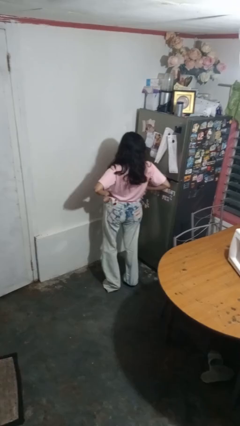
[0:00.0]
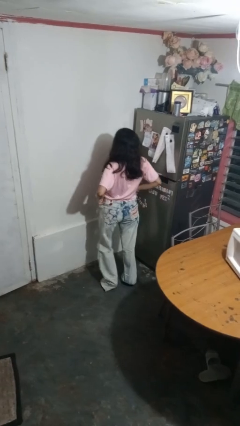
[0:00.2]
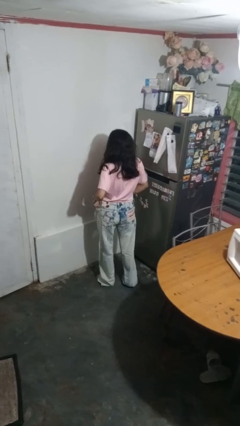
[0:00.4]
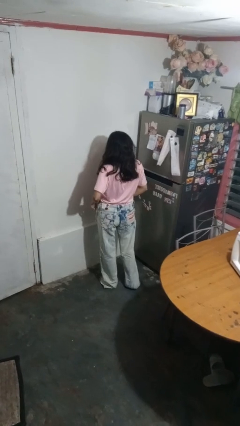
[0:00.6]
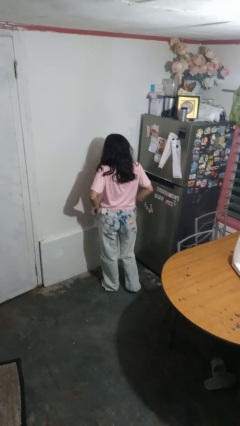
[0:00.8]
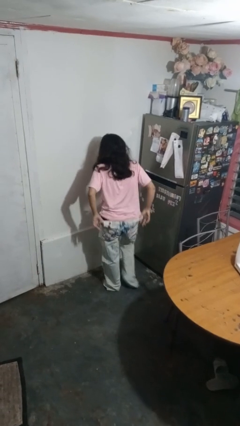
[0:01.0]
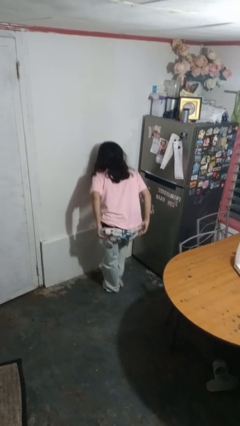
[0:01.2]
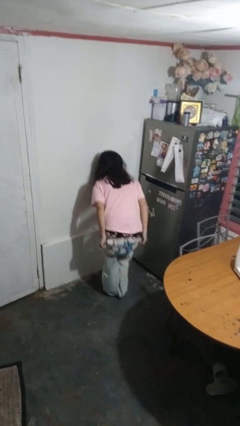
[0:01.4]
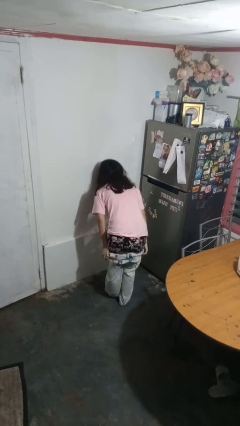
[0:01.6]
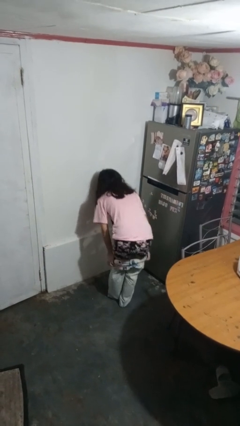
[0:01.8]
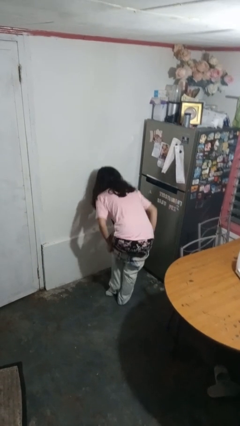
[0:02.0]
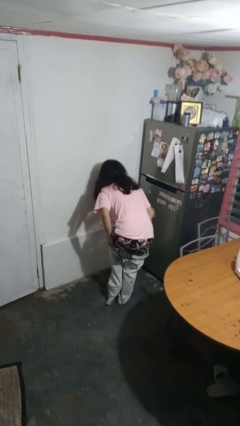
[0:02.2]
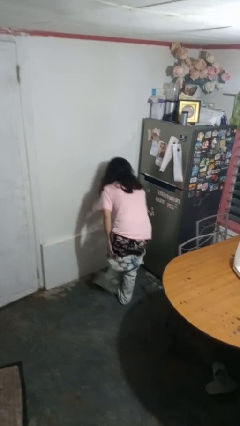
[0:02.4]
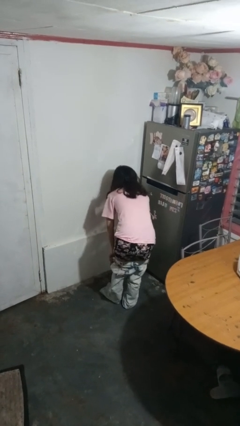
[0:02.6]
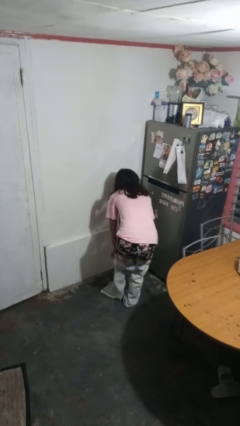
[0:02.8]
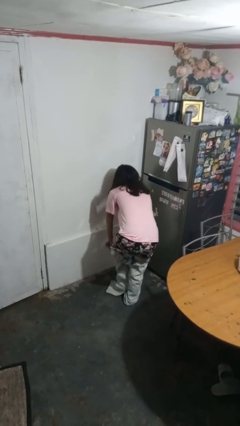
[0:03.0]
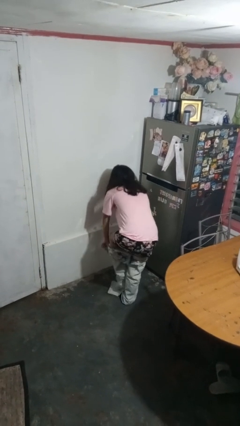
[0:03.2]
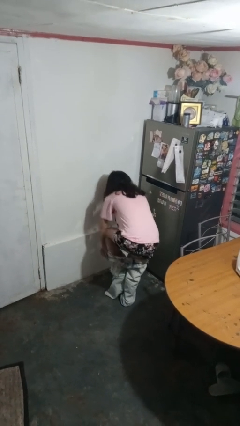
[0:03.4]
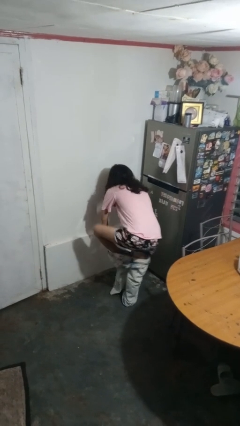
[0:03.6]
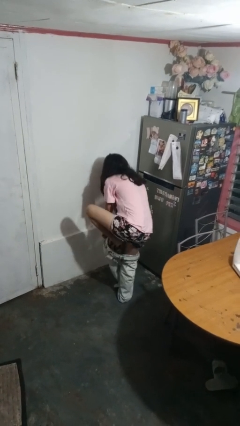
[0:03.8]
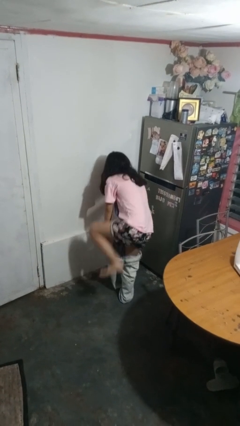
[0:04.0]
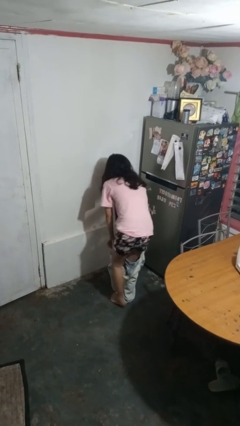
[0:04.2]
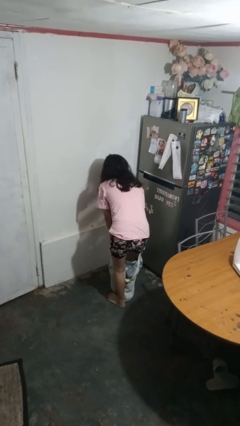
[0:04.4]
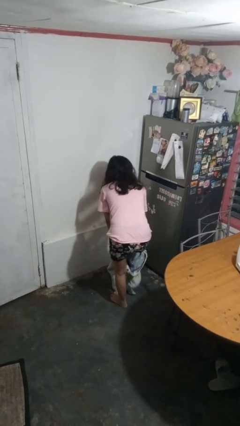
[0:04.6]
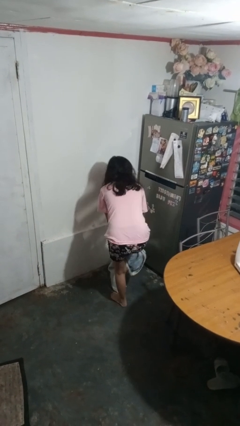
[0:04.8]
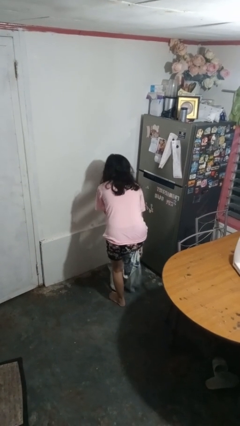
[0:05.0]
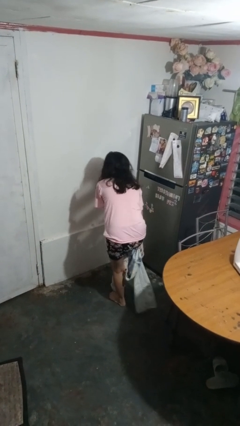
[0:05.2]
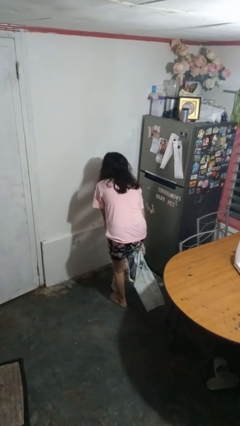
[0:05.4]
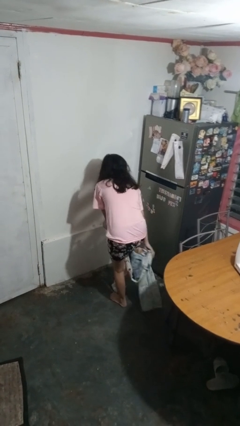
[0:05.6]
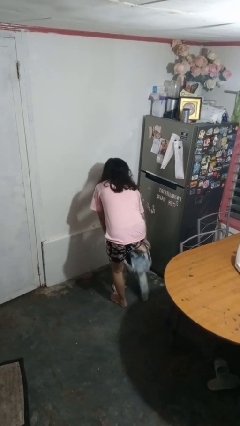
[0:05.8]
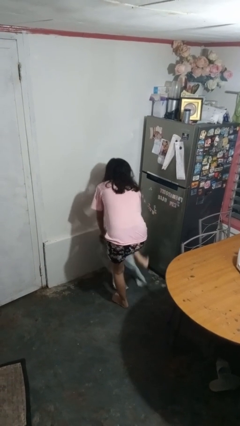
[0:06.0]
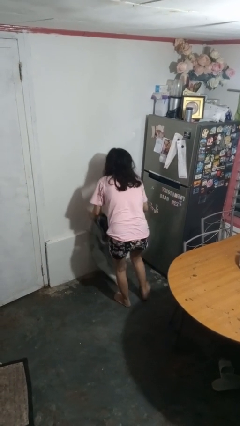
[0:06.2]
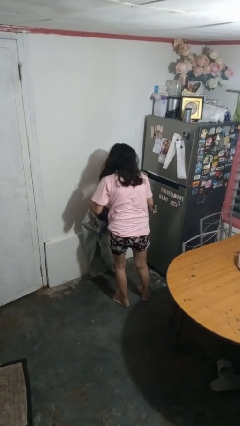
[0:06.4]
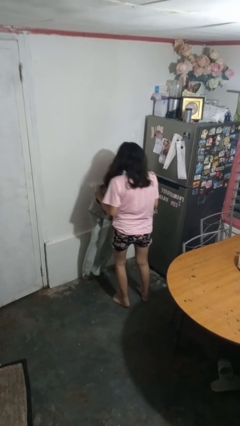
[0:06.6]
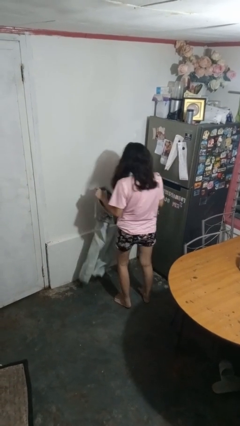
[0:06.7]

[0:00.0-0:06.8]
person takes off pants

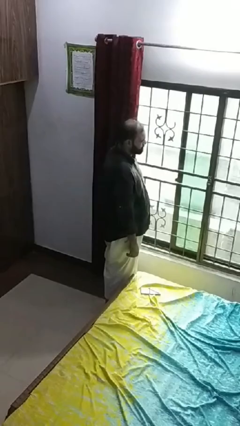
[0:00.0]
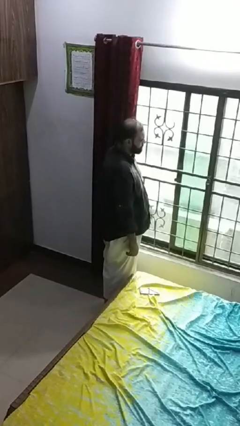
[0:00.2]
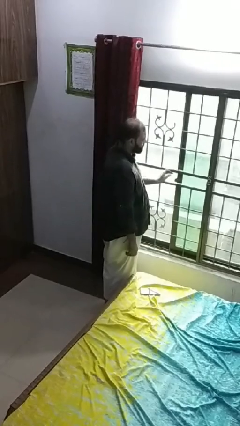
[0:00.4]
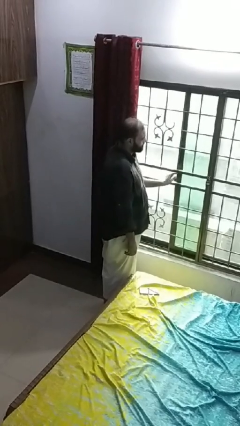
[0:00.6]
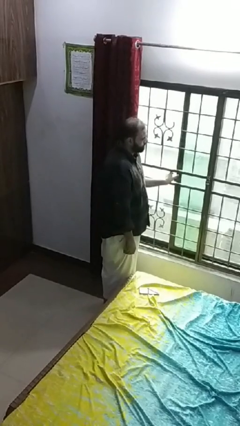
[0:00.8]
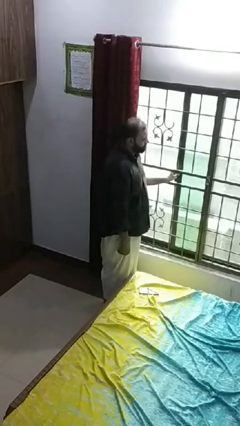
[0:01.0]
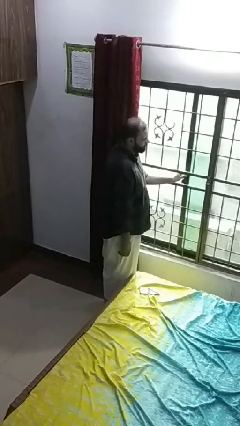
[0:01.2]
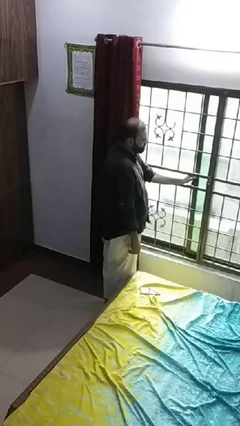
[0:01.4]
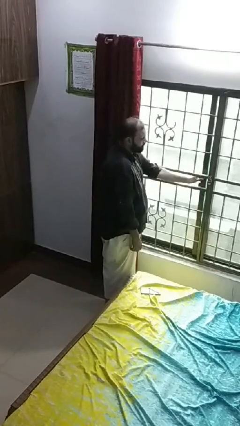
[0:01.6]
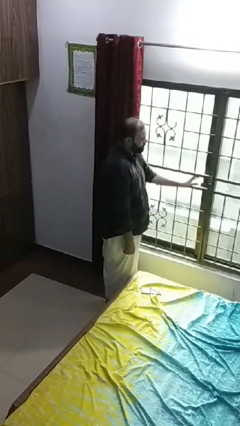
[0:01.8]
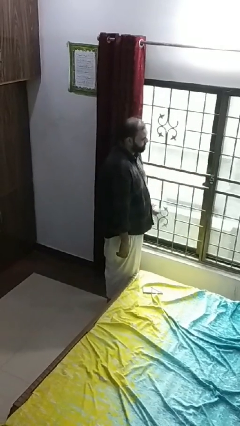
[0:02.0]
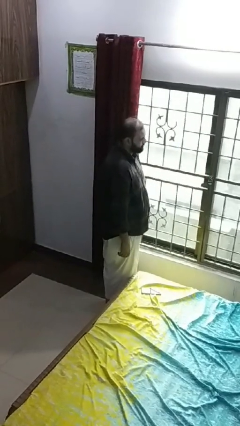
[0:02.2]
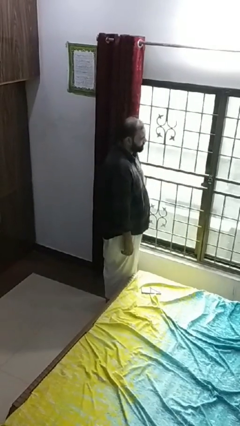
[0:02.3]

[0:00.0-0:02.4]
person closes home window

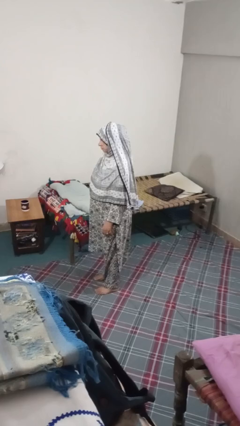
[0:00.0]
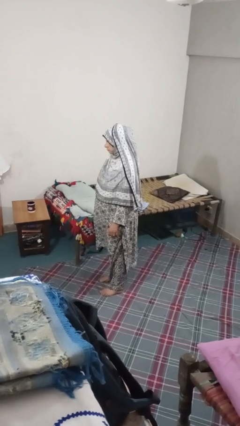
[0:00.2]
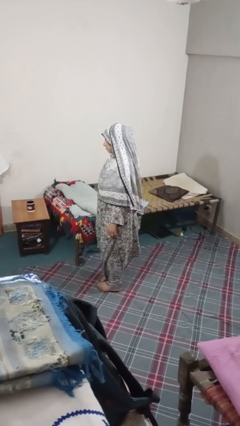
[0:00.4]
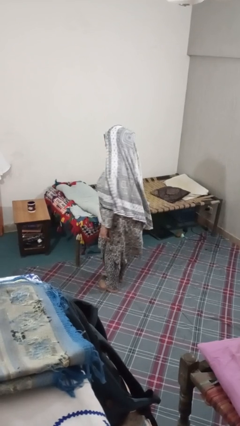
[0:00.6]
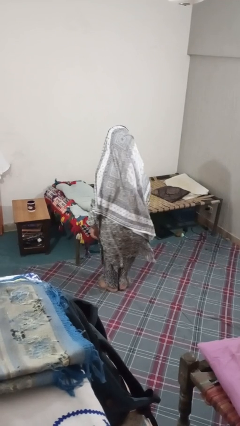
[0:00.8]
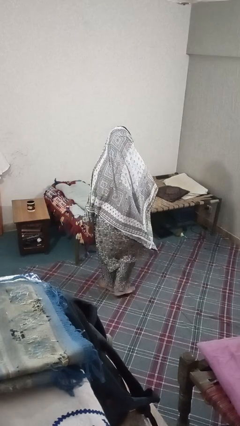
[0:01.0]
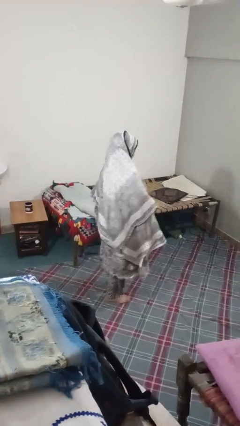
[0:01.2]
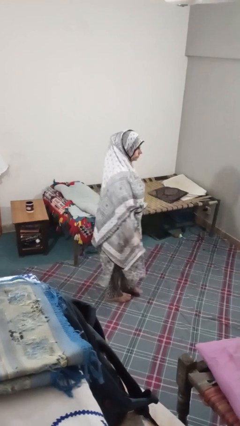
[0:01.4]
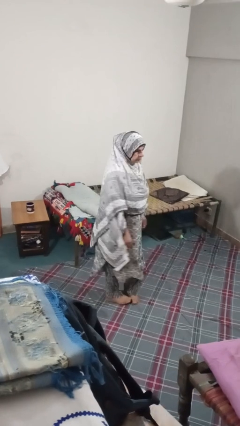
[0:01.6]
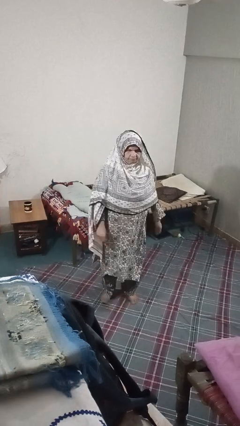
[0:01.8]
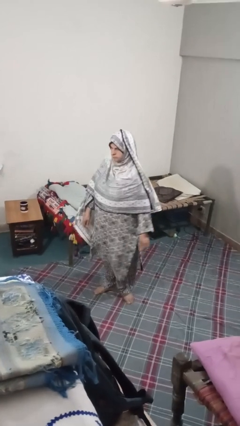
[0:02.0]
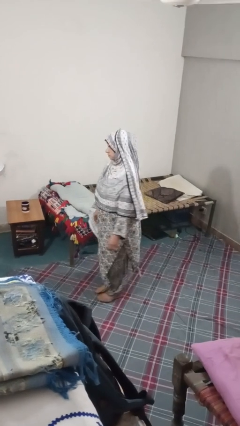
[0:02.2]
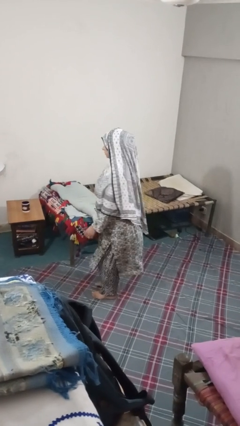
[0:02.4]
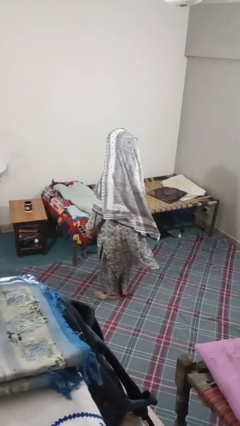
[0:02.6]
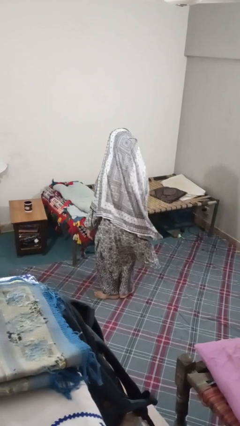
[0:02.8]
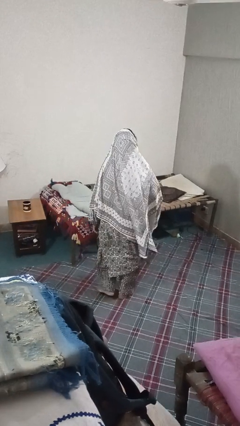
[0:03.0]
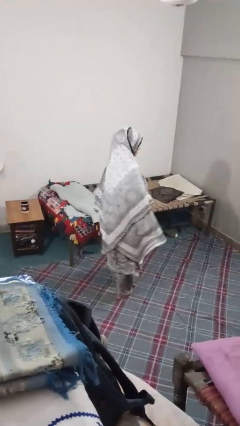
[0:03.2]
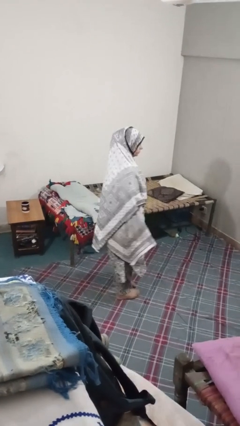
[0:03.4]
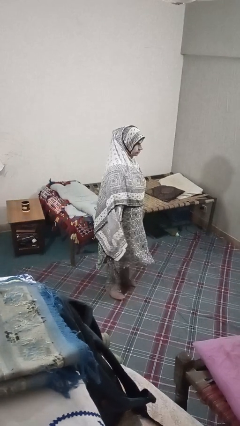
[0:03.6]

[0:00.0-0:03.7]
person twirls

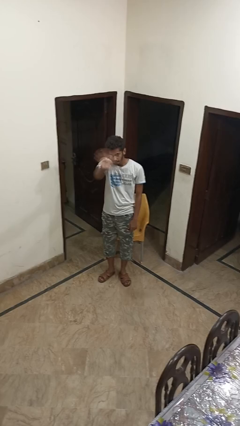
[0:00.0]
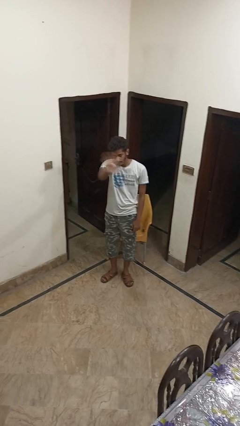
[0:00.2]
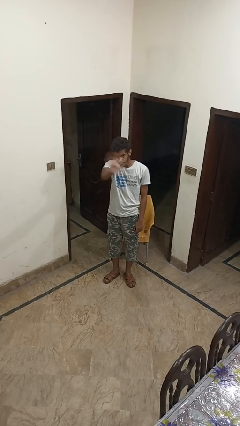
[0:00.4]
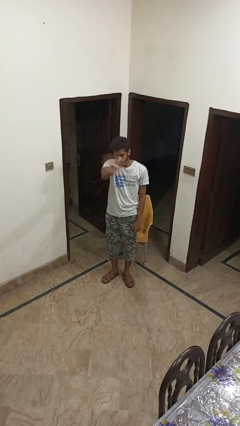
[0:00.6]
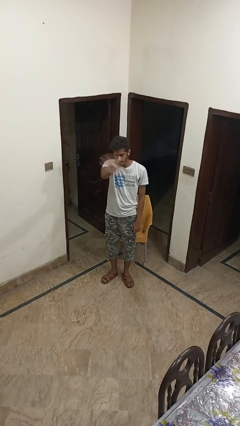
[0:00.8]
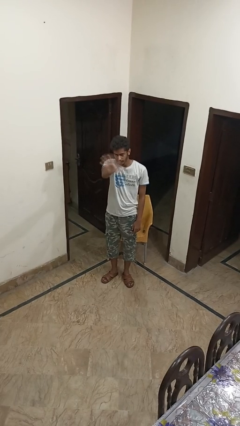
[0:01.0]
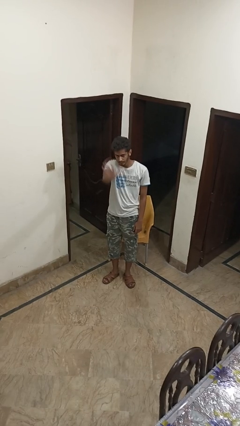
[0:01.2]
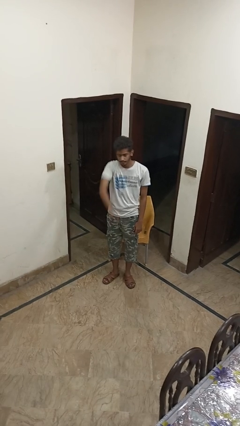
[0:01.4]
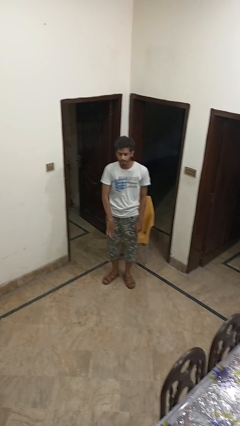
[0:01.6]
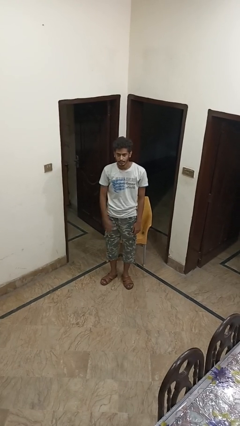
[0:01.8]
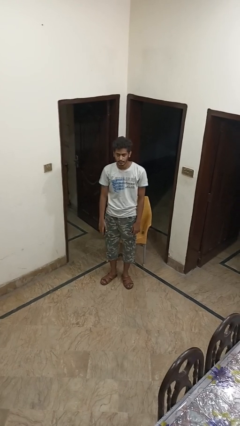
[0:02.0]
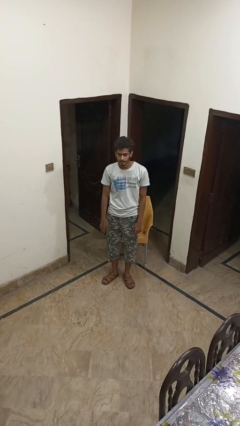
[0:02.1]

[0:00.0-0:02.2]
person waves at person

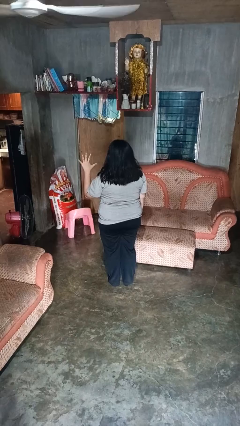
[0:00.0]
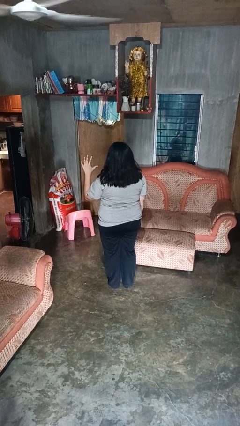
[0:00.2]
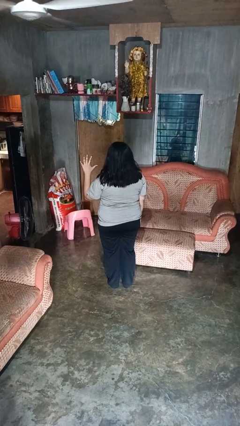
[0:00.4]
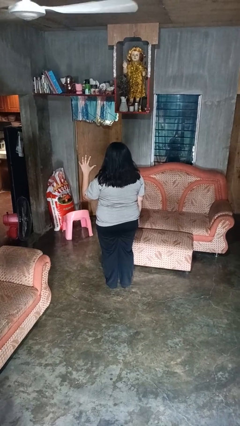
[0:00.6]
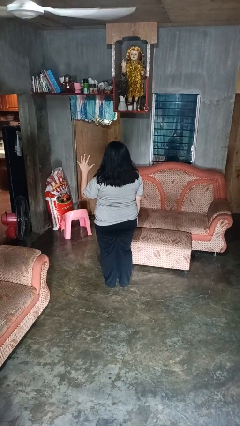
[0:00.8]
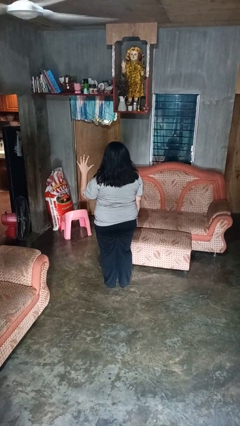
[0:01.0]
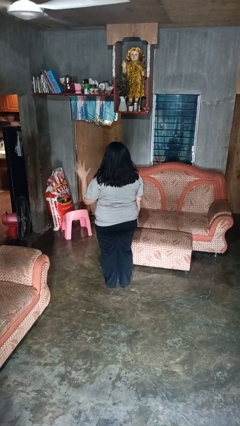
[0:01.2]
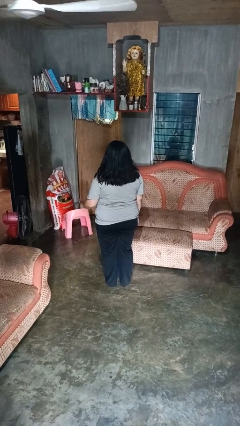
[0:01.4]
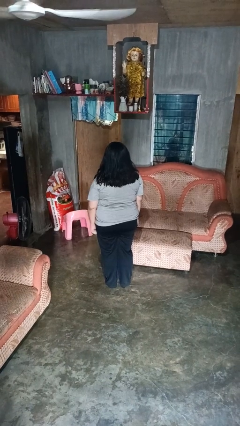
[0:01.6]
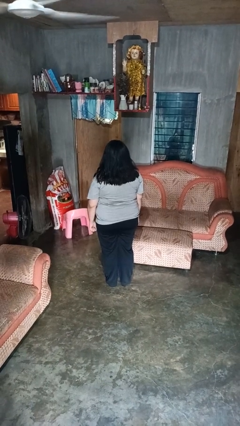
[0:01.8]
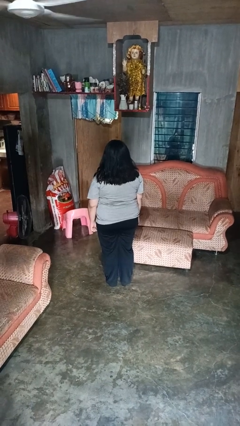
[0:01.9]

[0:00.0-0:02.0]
person gestures number five

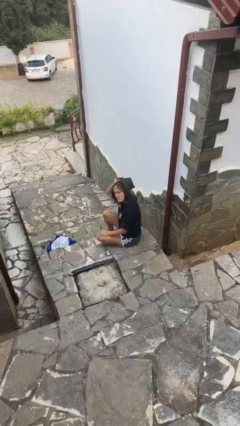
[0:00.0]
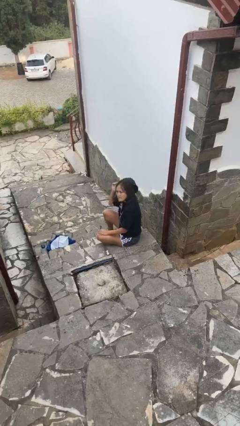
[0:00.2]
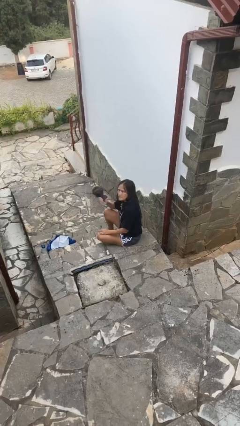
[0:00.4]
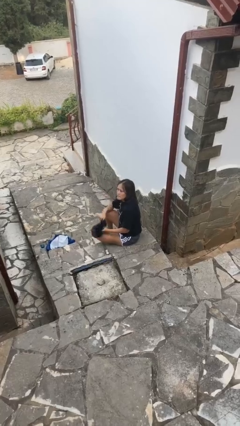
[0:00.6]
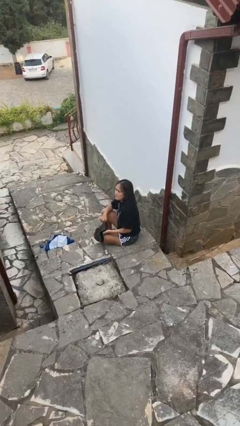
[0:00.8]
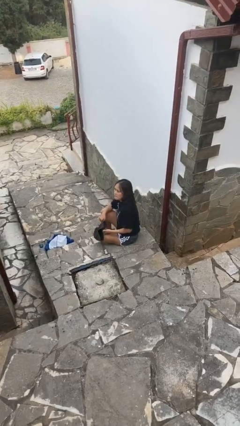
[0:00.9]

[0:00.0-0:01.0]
person takes off hat
